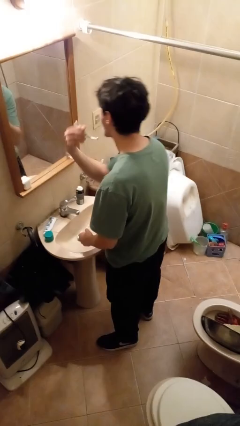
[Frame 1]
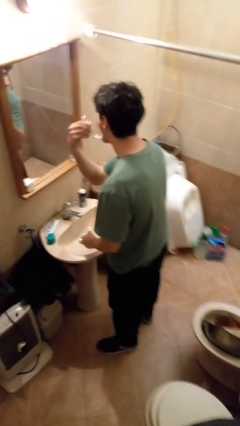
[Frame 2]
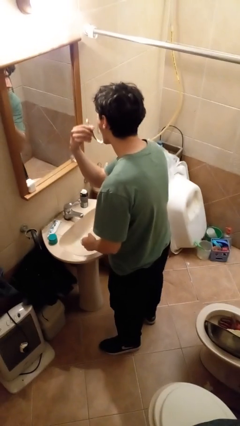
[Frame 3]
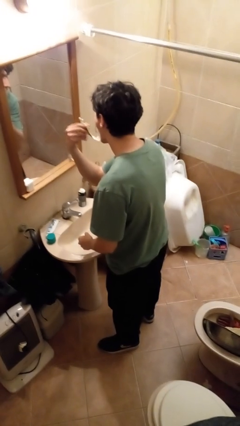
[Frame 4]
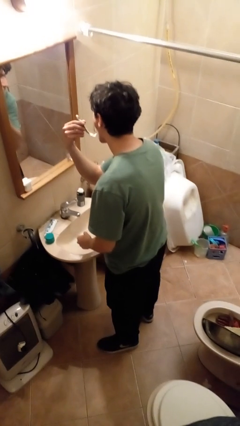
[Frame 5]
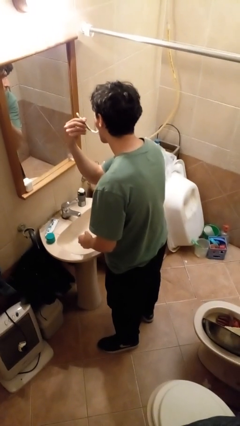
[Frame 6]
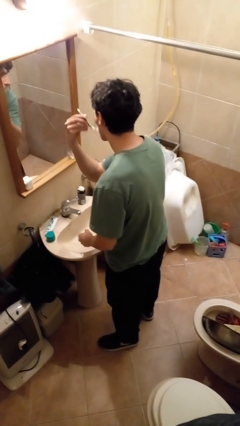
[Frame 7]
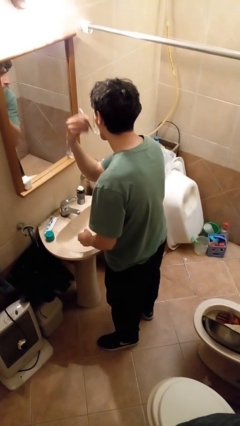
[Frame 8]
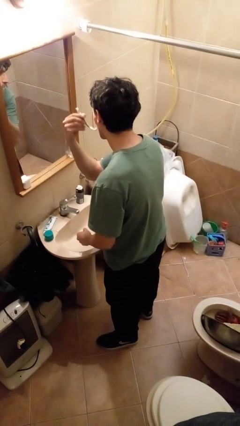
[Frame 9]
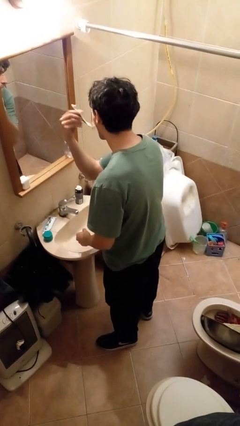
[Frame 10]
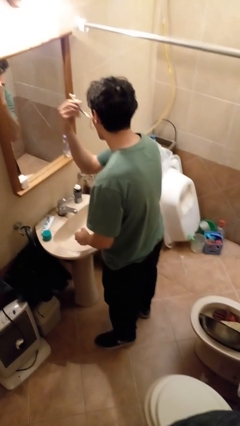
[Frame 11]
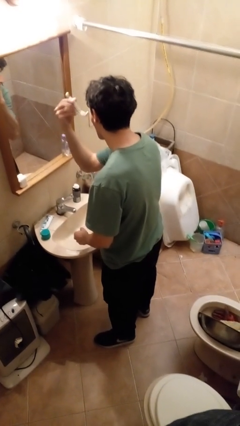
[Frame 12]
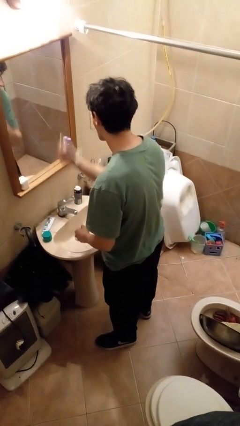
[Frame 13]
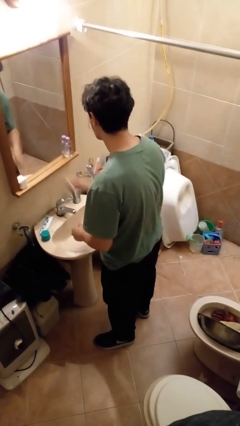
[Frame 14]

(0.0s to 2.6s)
person shaves face

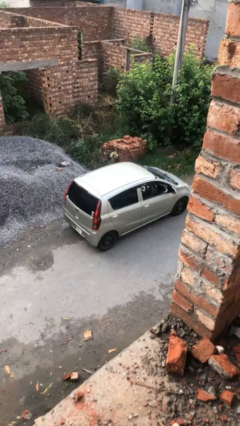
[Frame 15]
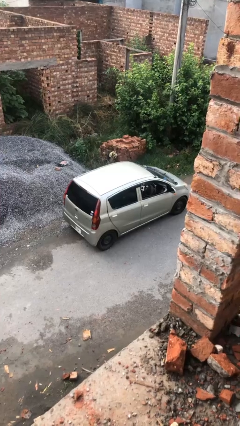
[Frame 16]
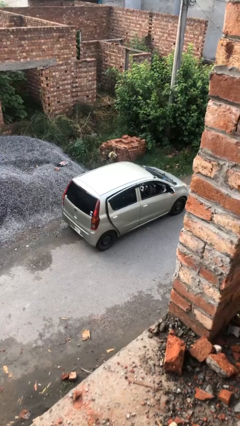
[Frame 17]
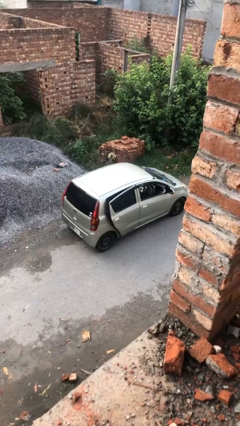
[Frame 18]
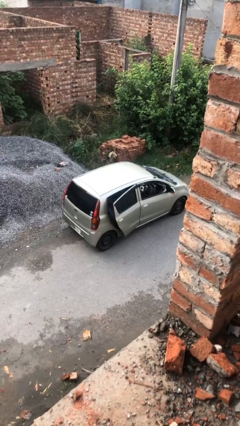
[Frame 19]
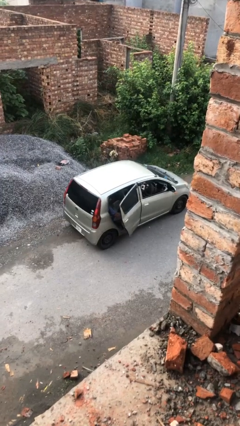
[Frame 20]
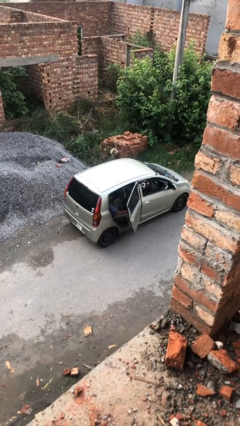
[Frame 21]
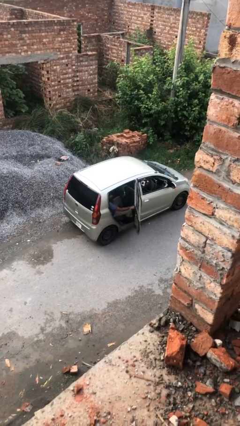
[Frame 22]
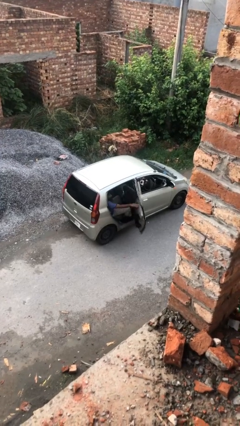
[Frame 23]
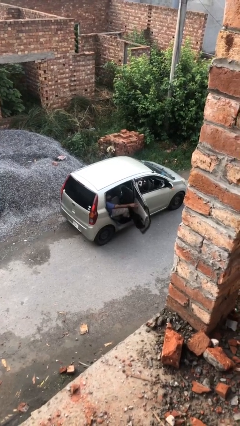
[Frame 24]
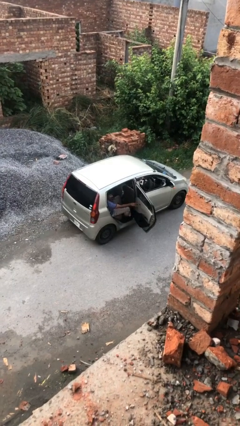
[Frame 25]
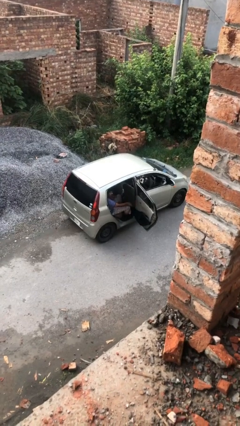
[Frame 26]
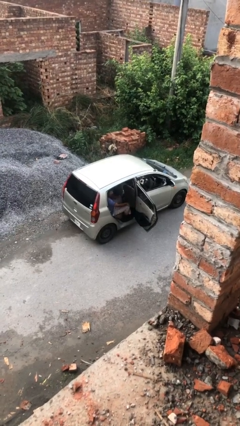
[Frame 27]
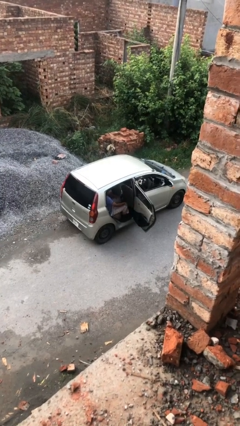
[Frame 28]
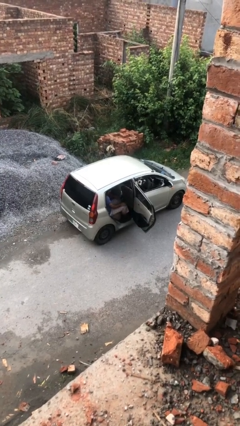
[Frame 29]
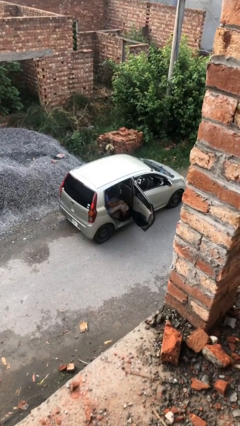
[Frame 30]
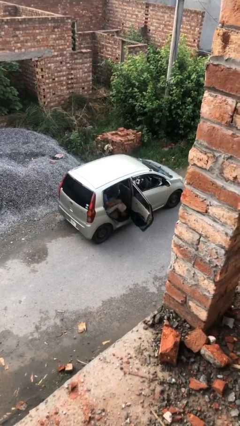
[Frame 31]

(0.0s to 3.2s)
person opens car door

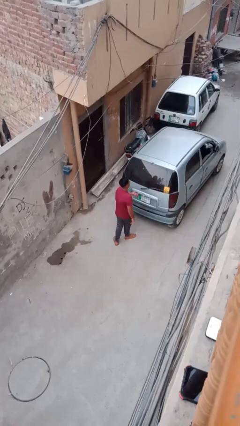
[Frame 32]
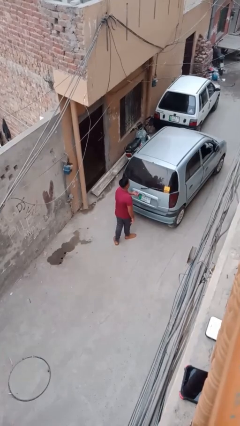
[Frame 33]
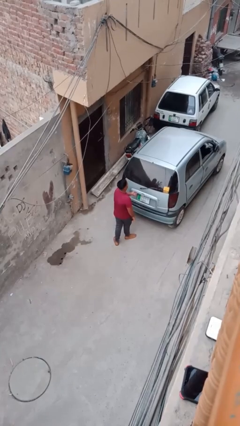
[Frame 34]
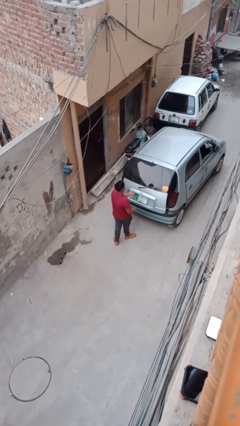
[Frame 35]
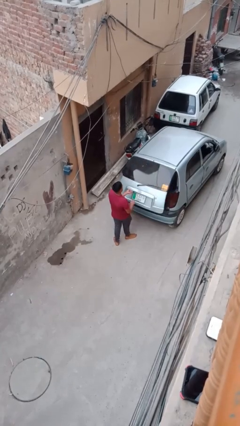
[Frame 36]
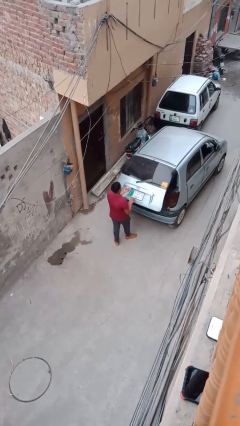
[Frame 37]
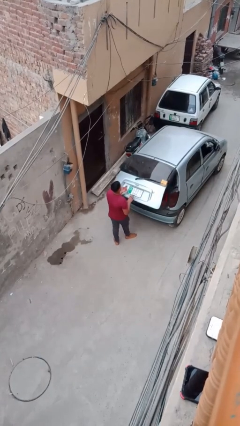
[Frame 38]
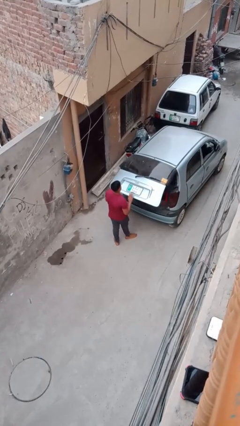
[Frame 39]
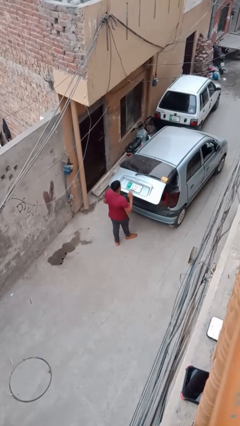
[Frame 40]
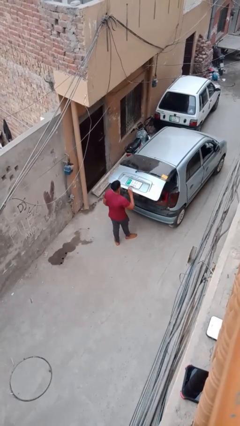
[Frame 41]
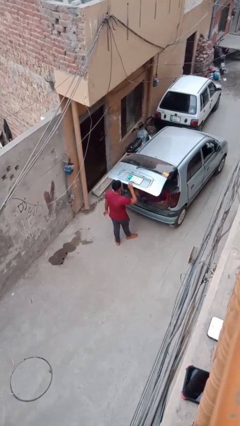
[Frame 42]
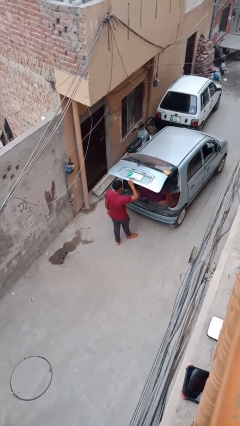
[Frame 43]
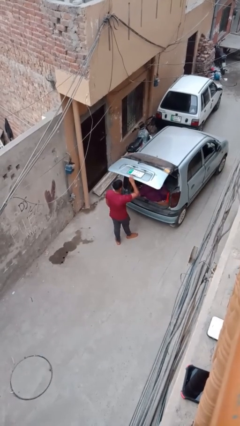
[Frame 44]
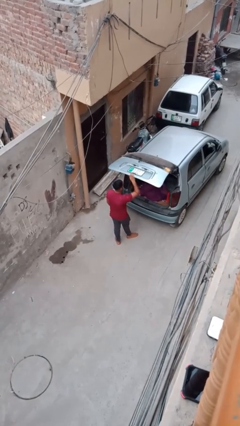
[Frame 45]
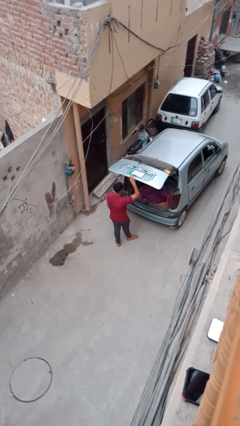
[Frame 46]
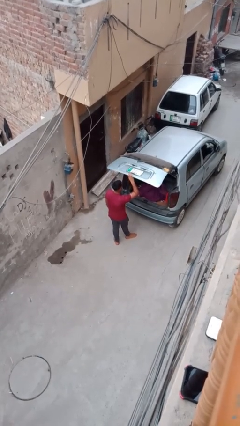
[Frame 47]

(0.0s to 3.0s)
person opens car trunk

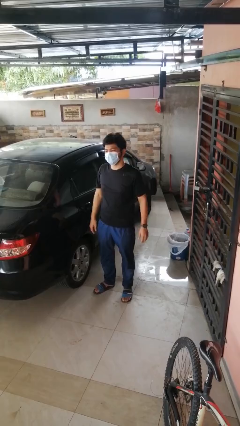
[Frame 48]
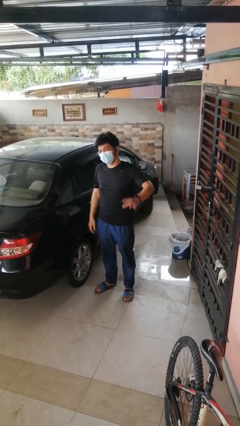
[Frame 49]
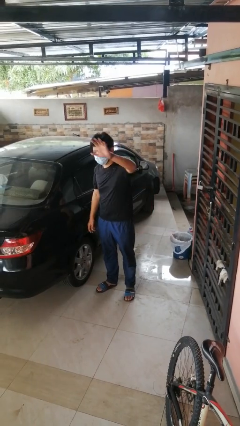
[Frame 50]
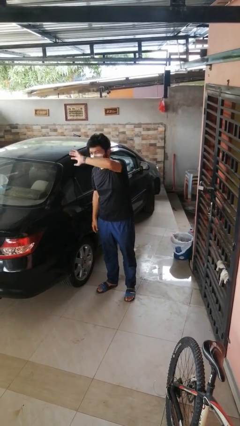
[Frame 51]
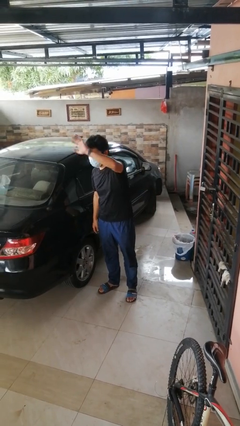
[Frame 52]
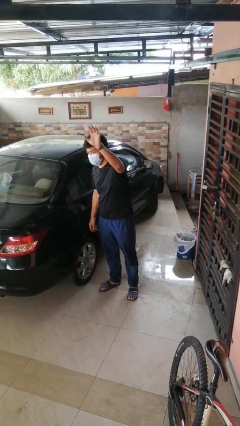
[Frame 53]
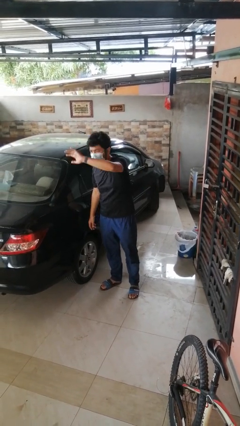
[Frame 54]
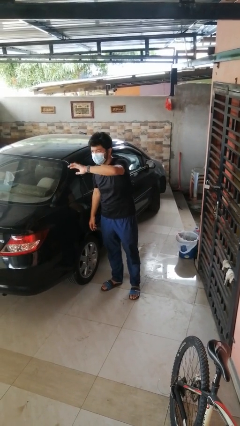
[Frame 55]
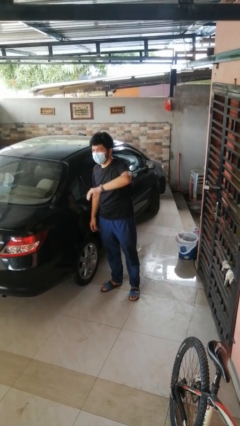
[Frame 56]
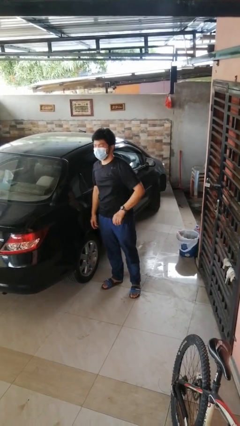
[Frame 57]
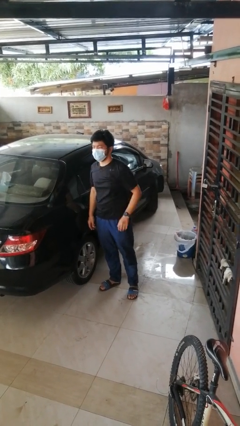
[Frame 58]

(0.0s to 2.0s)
person waves at person

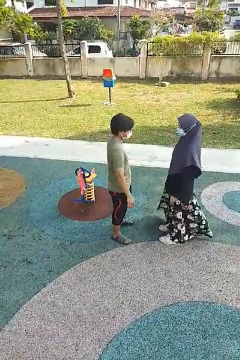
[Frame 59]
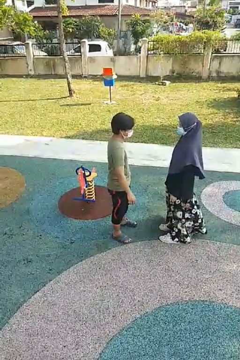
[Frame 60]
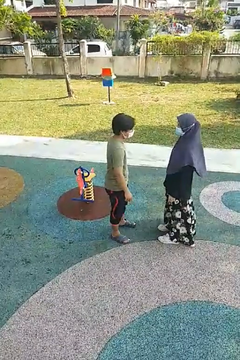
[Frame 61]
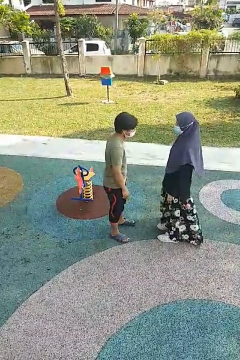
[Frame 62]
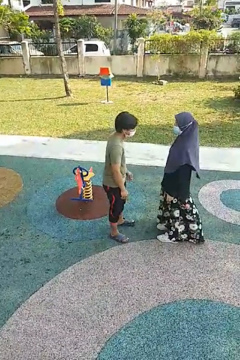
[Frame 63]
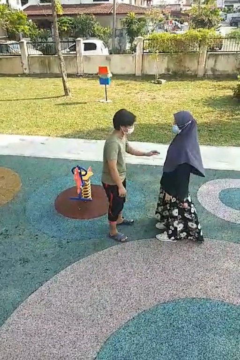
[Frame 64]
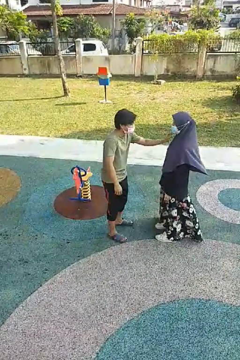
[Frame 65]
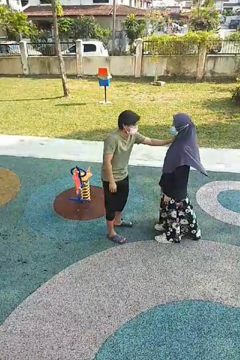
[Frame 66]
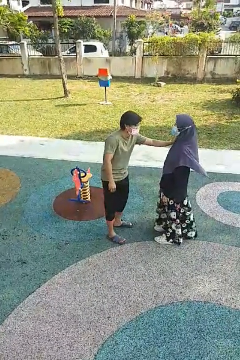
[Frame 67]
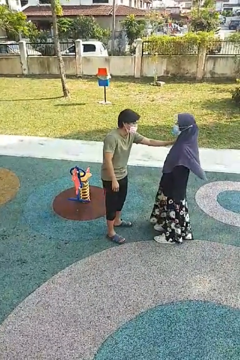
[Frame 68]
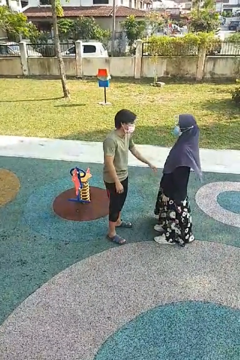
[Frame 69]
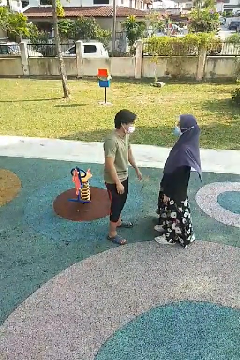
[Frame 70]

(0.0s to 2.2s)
person shoves person

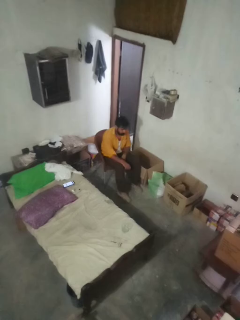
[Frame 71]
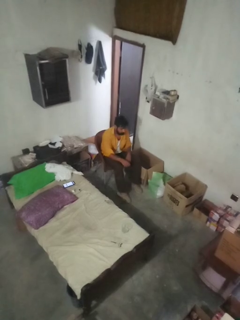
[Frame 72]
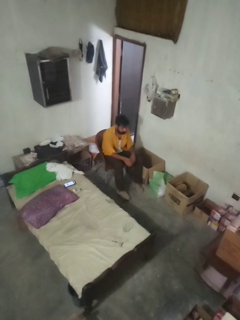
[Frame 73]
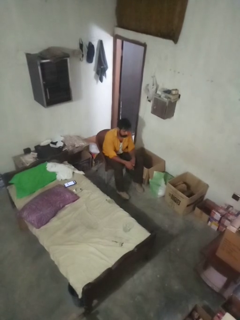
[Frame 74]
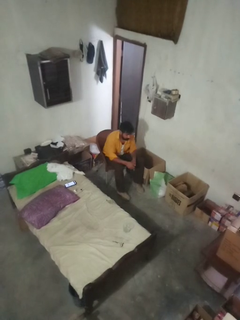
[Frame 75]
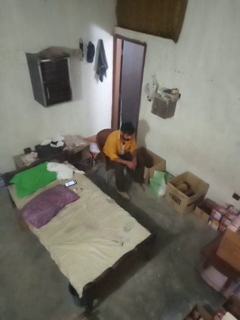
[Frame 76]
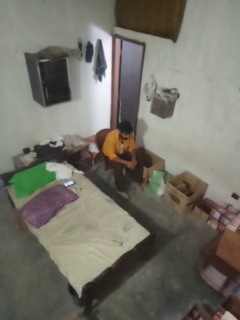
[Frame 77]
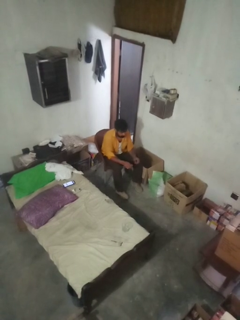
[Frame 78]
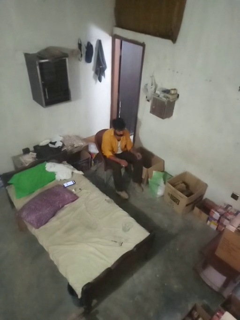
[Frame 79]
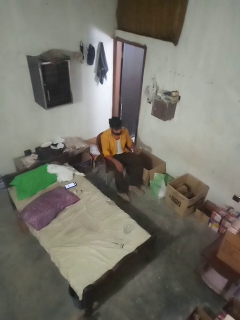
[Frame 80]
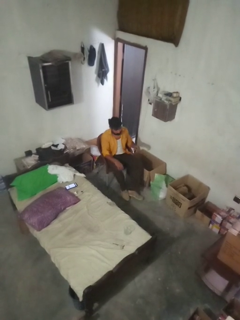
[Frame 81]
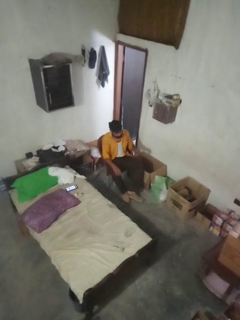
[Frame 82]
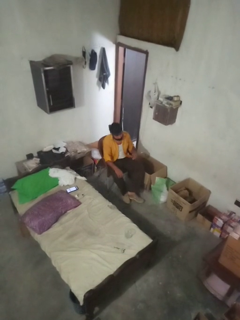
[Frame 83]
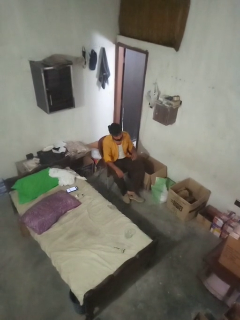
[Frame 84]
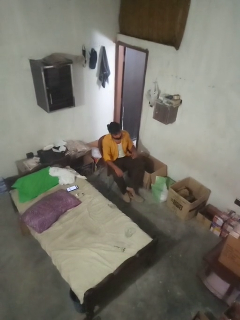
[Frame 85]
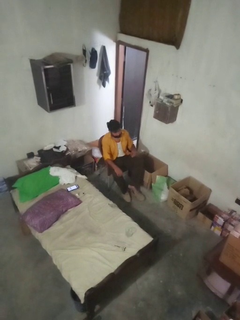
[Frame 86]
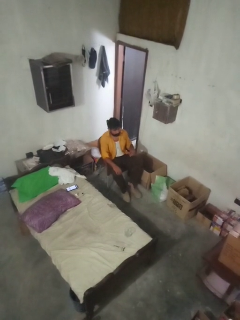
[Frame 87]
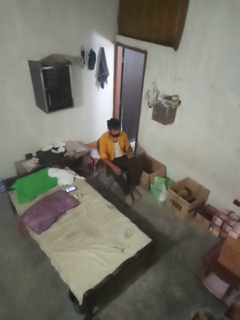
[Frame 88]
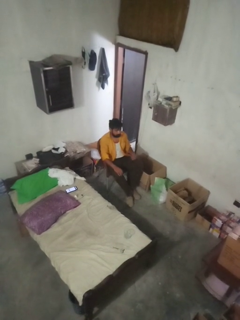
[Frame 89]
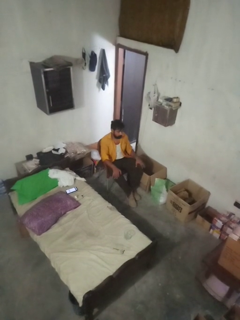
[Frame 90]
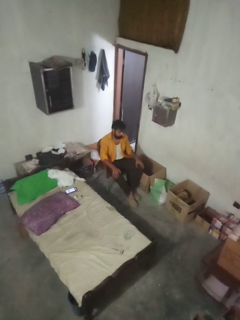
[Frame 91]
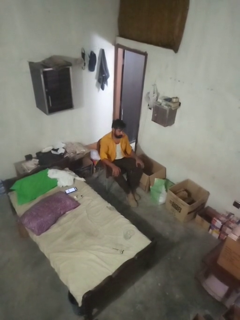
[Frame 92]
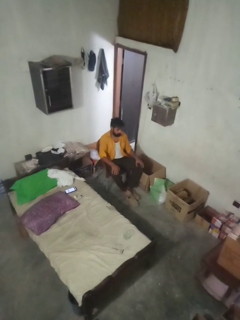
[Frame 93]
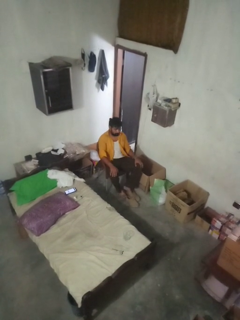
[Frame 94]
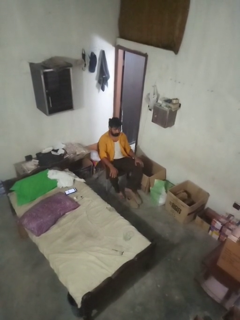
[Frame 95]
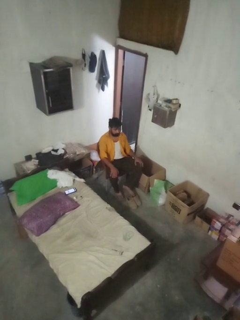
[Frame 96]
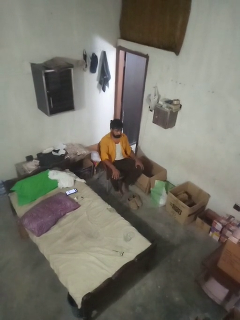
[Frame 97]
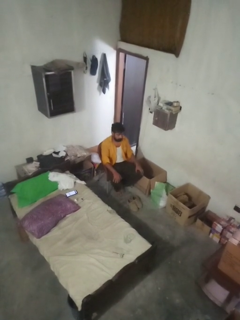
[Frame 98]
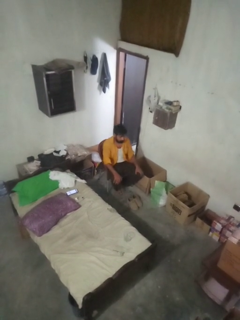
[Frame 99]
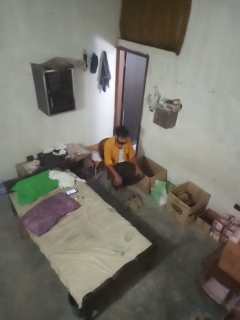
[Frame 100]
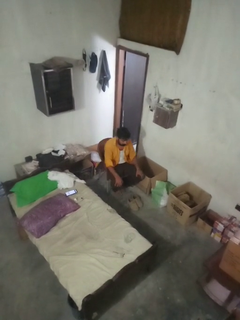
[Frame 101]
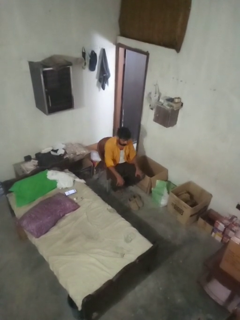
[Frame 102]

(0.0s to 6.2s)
person takes off boots
